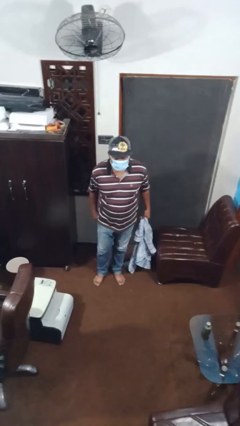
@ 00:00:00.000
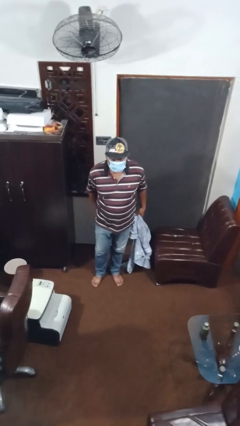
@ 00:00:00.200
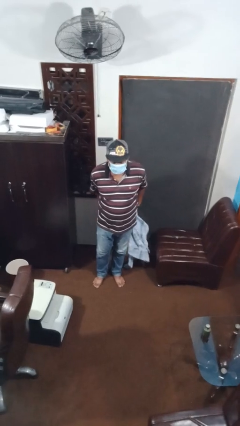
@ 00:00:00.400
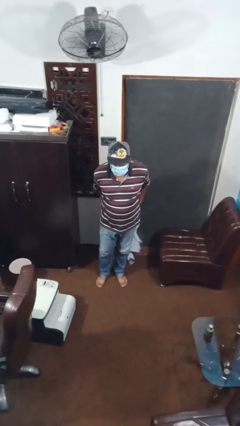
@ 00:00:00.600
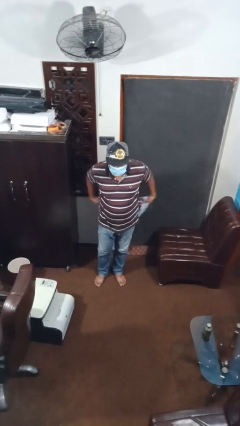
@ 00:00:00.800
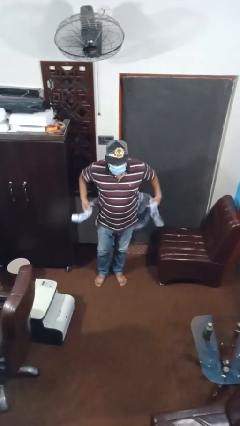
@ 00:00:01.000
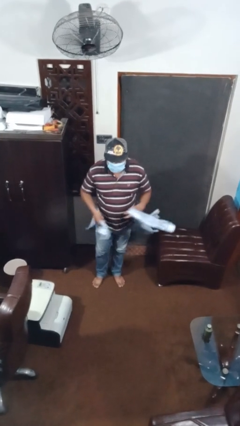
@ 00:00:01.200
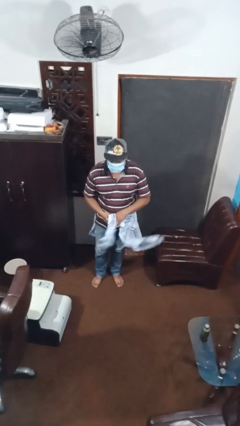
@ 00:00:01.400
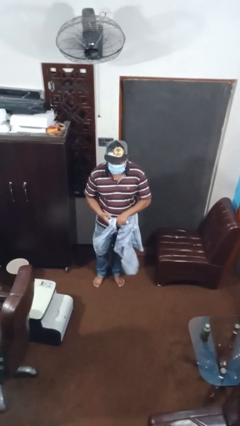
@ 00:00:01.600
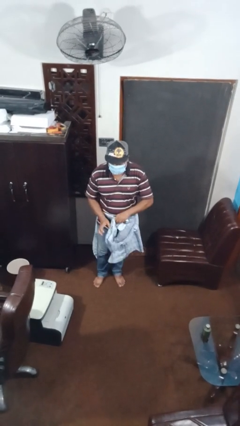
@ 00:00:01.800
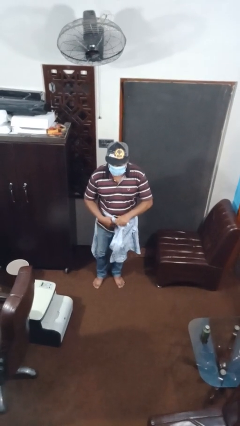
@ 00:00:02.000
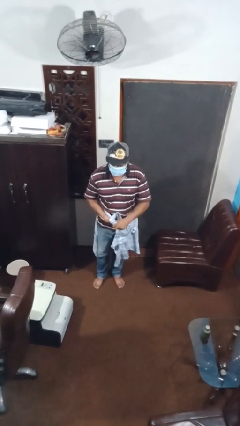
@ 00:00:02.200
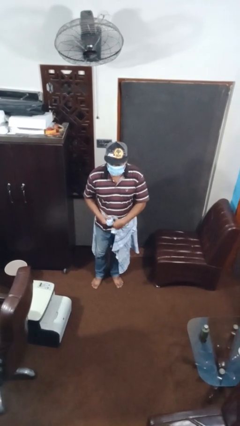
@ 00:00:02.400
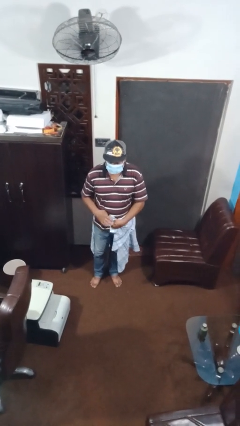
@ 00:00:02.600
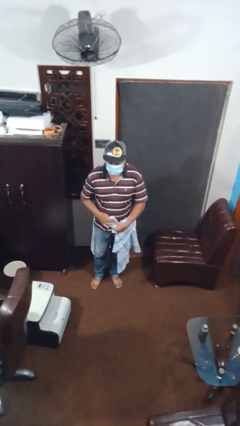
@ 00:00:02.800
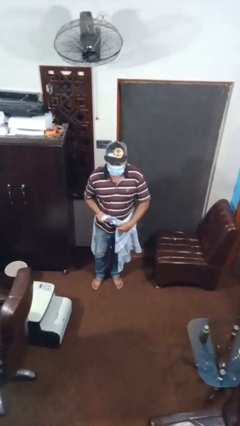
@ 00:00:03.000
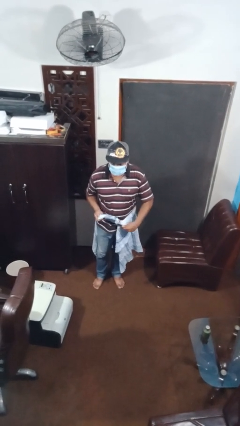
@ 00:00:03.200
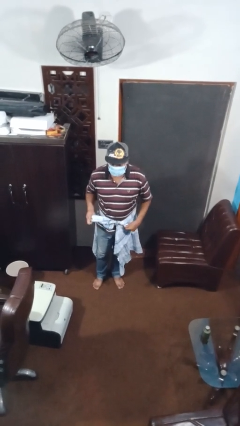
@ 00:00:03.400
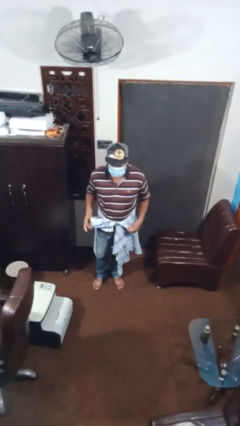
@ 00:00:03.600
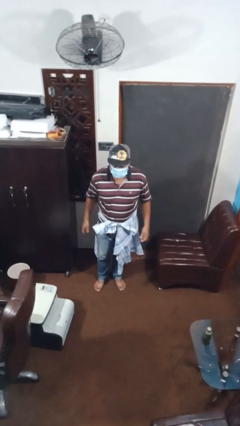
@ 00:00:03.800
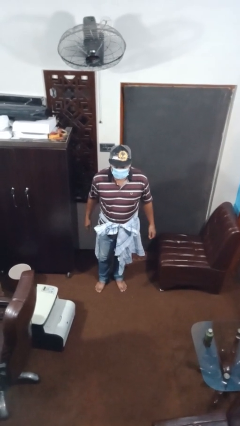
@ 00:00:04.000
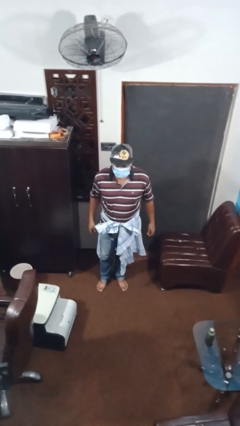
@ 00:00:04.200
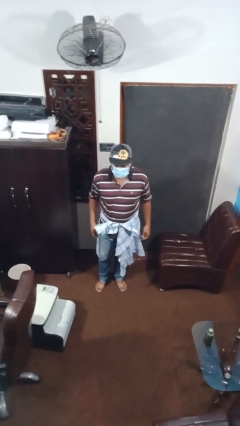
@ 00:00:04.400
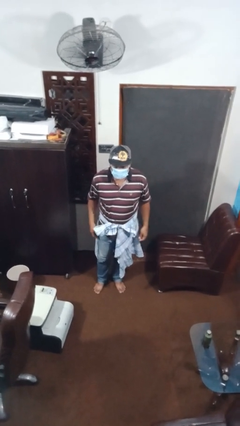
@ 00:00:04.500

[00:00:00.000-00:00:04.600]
person ties jacket around waist

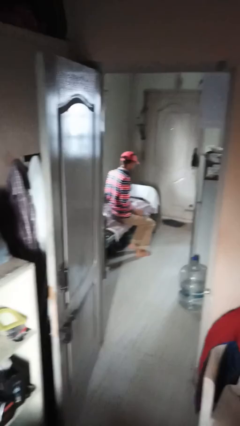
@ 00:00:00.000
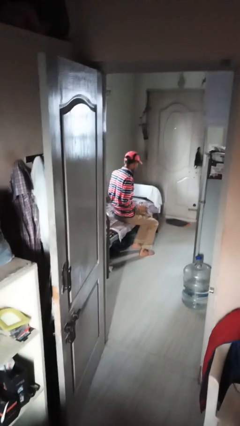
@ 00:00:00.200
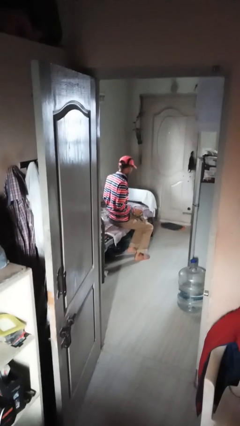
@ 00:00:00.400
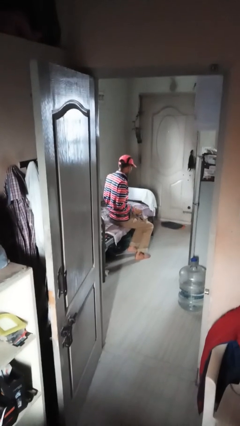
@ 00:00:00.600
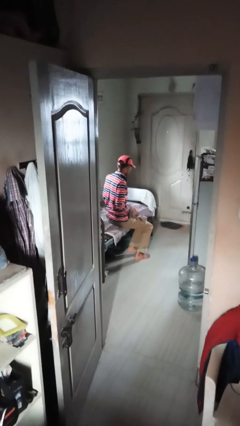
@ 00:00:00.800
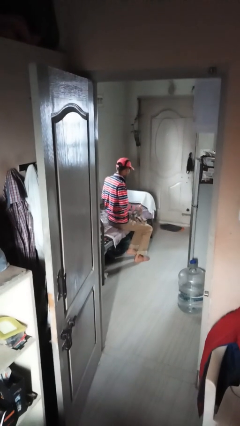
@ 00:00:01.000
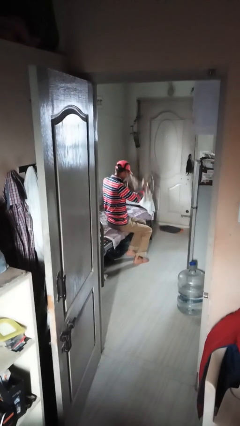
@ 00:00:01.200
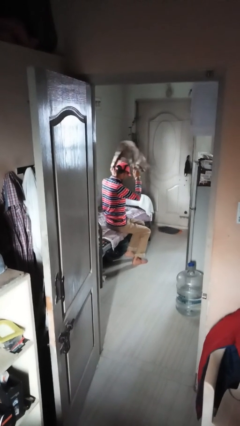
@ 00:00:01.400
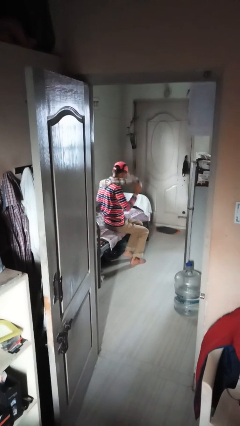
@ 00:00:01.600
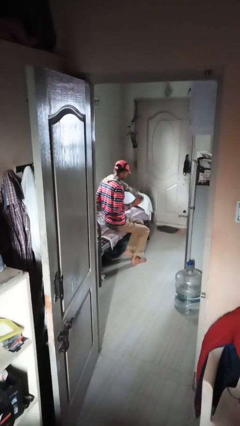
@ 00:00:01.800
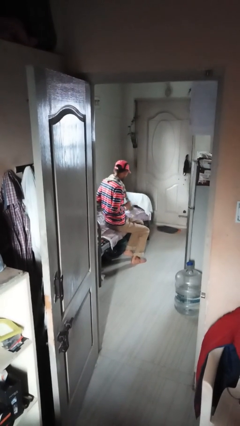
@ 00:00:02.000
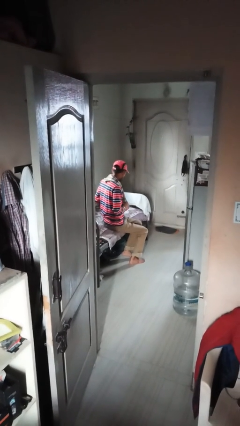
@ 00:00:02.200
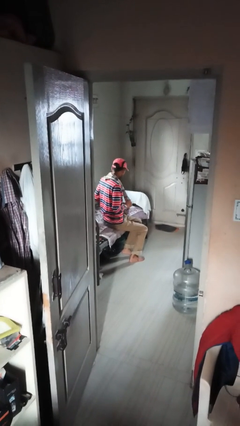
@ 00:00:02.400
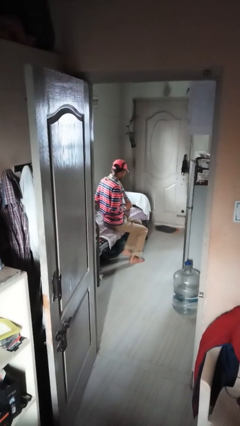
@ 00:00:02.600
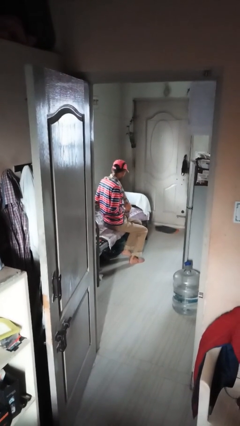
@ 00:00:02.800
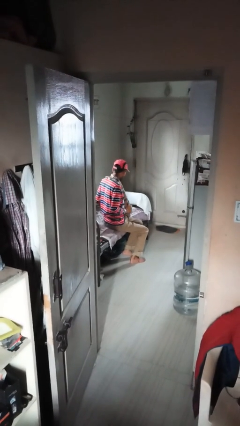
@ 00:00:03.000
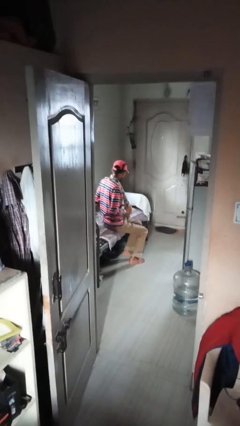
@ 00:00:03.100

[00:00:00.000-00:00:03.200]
person puts on scarf

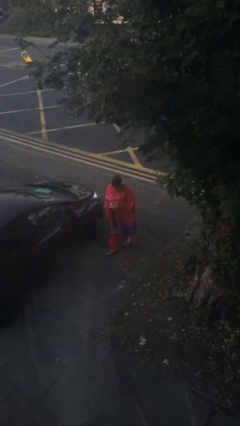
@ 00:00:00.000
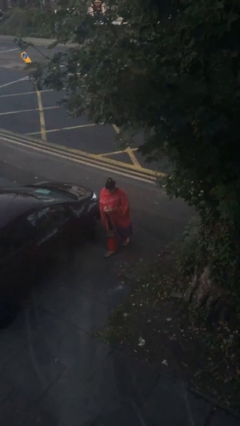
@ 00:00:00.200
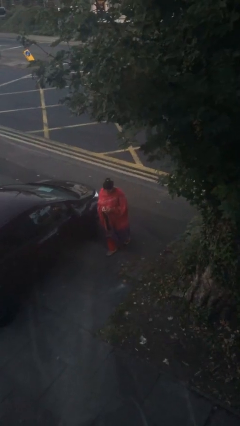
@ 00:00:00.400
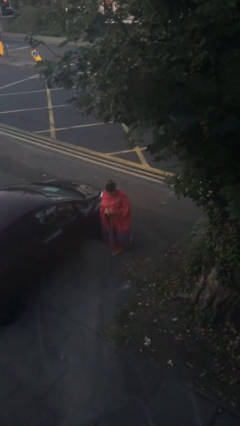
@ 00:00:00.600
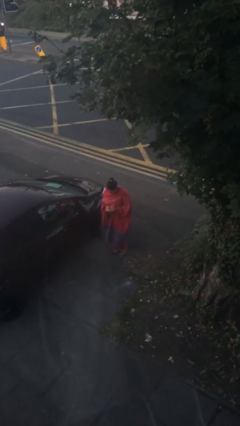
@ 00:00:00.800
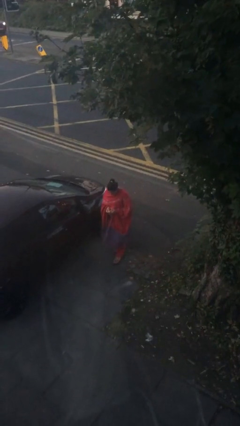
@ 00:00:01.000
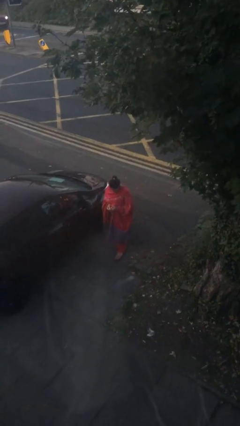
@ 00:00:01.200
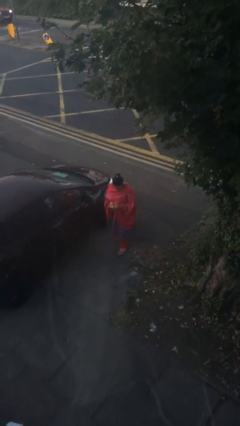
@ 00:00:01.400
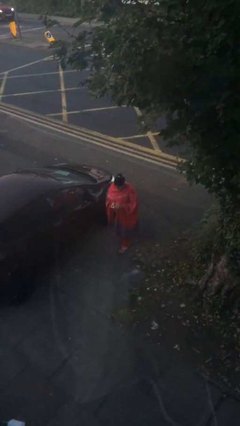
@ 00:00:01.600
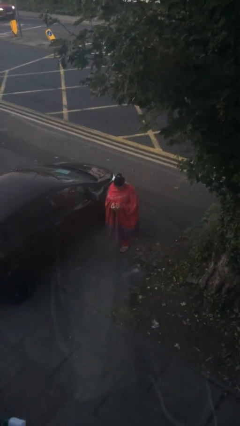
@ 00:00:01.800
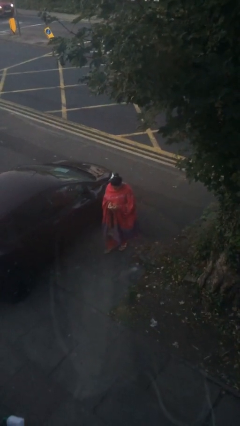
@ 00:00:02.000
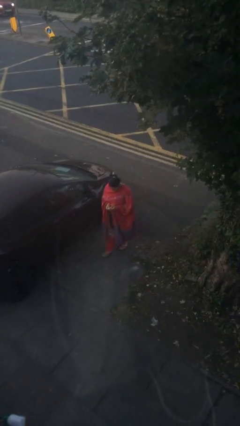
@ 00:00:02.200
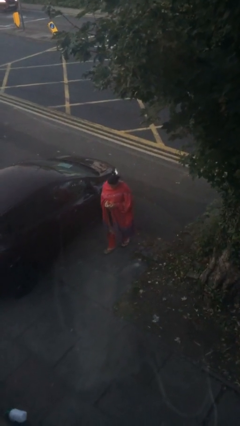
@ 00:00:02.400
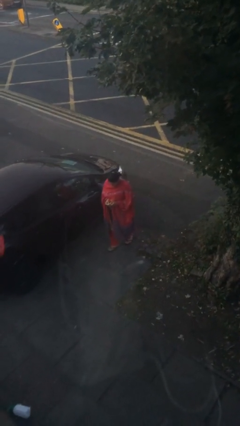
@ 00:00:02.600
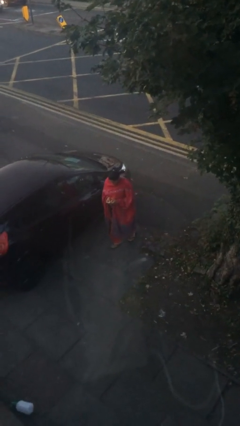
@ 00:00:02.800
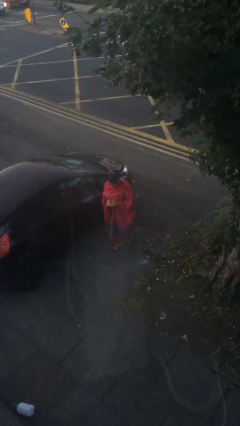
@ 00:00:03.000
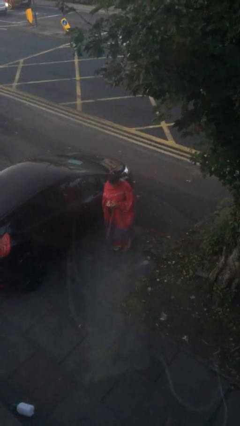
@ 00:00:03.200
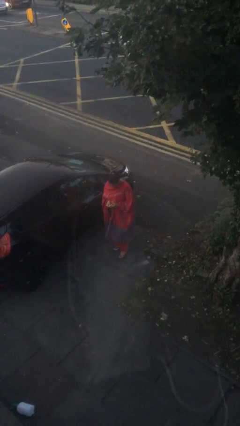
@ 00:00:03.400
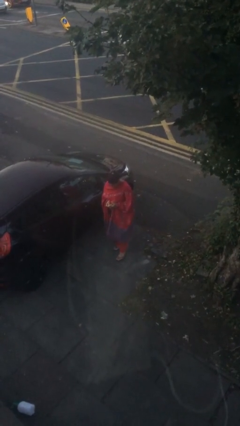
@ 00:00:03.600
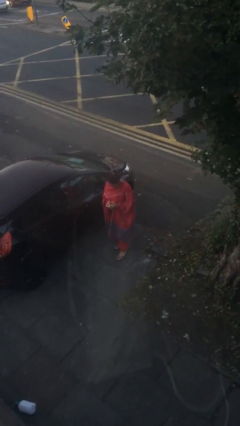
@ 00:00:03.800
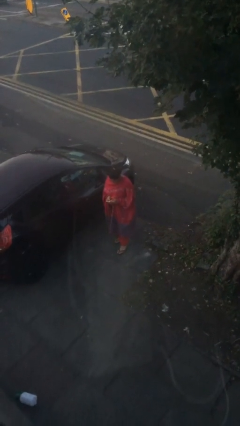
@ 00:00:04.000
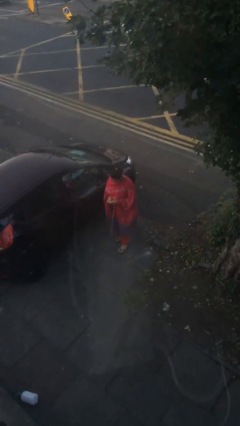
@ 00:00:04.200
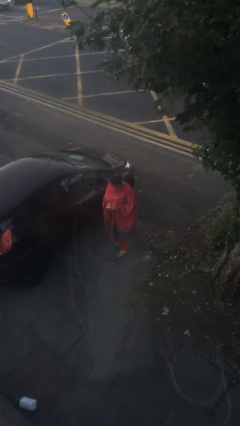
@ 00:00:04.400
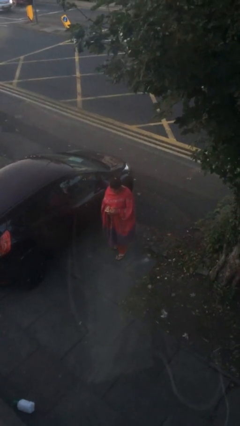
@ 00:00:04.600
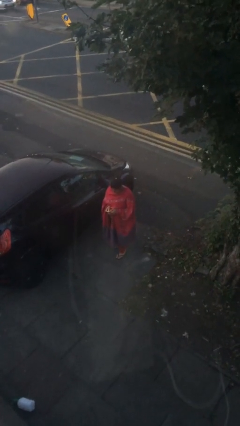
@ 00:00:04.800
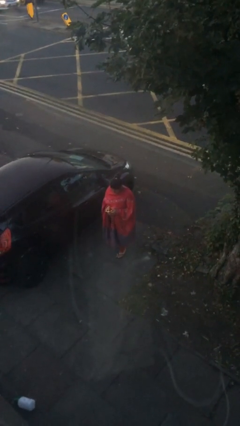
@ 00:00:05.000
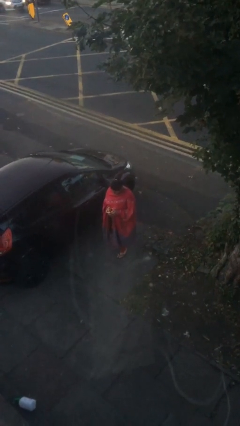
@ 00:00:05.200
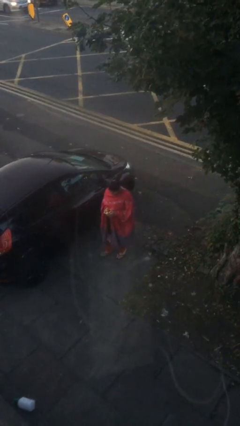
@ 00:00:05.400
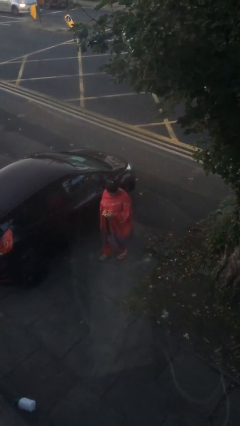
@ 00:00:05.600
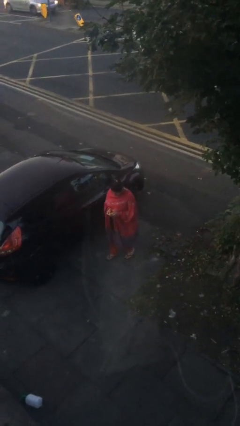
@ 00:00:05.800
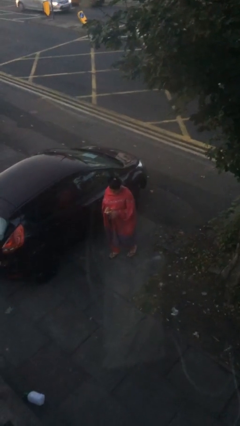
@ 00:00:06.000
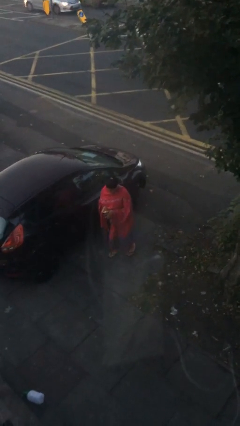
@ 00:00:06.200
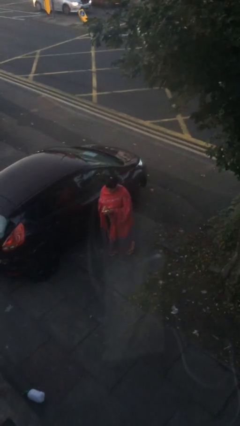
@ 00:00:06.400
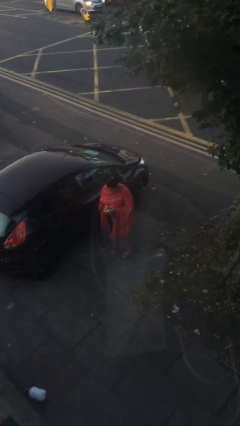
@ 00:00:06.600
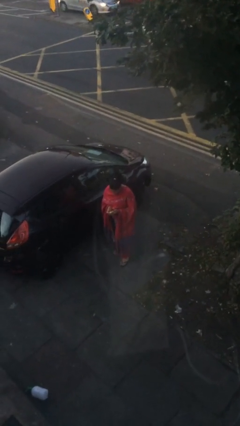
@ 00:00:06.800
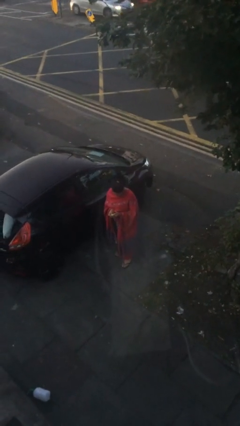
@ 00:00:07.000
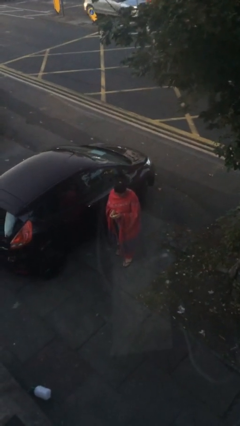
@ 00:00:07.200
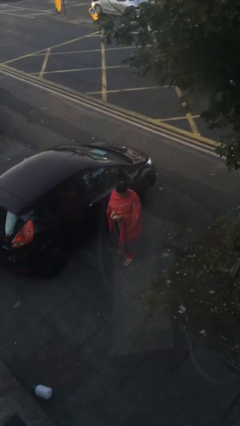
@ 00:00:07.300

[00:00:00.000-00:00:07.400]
person texts on phone

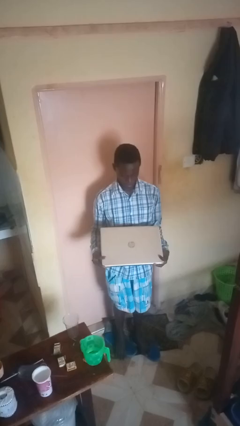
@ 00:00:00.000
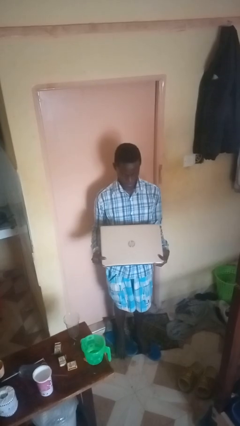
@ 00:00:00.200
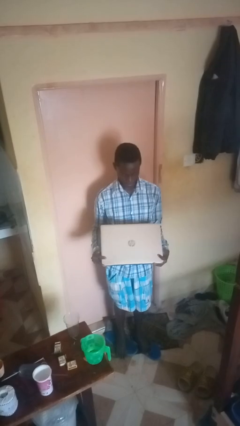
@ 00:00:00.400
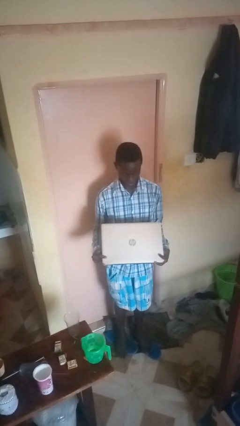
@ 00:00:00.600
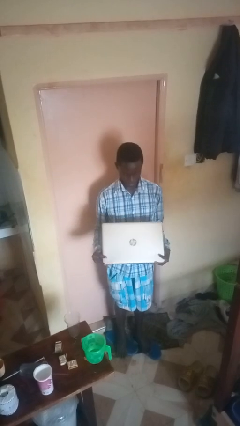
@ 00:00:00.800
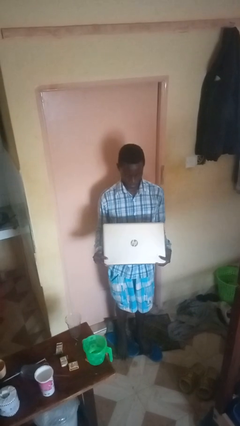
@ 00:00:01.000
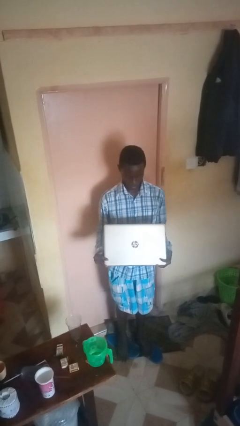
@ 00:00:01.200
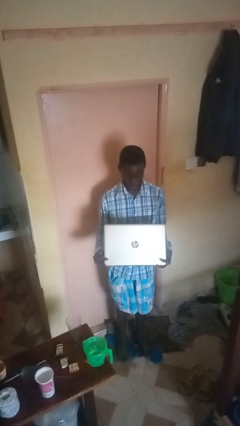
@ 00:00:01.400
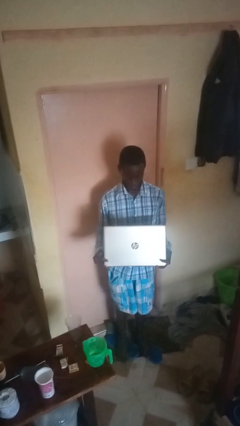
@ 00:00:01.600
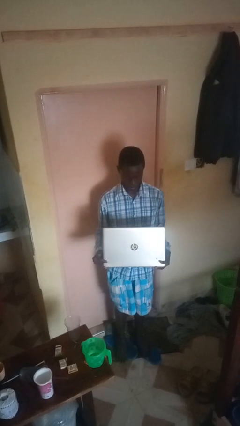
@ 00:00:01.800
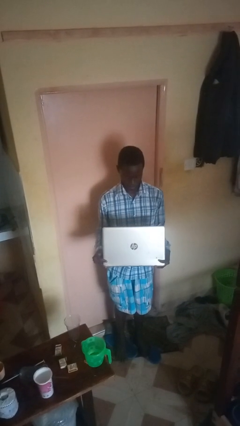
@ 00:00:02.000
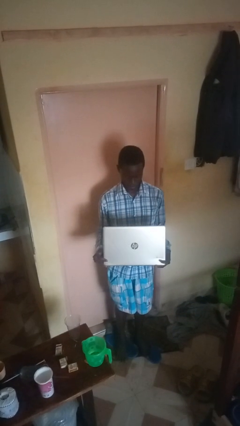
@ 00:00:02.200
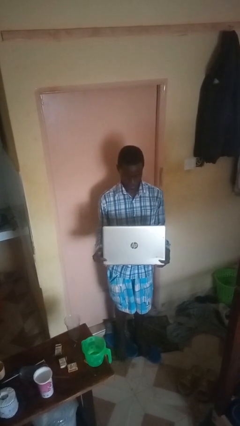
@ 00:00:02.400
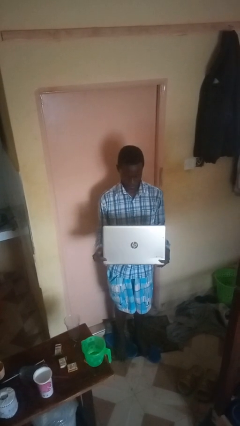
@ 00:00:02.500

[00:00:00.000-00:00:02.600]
person opens laptop
